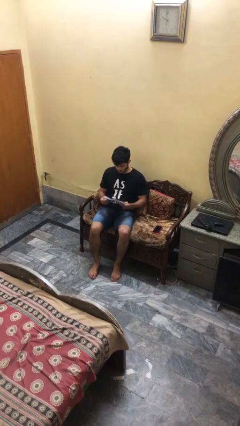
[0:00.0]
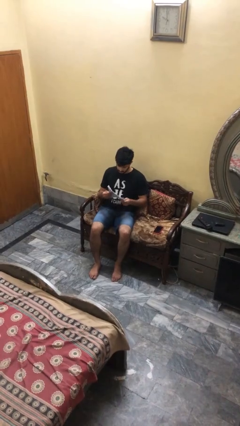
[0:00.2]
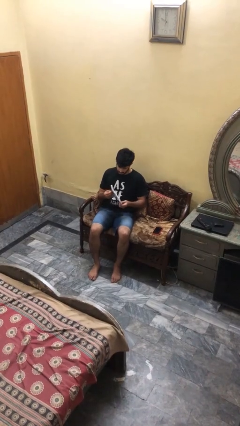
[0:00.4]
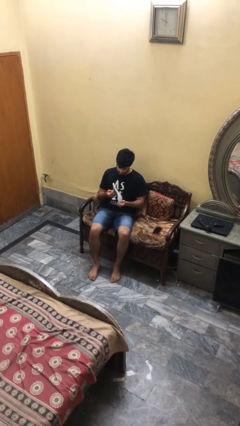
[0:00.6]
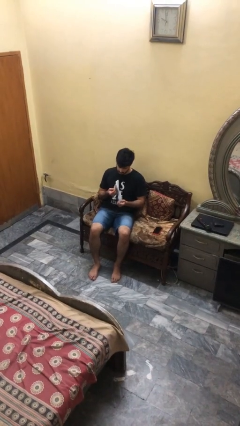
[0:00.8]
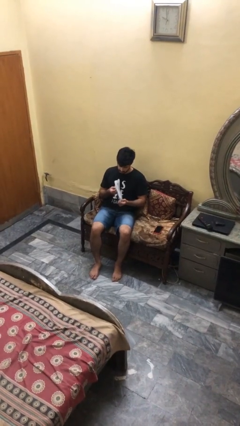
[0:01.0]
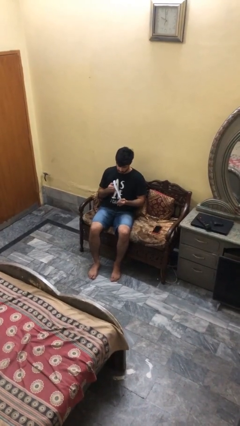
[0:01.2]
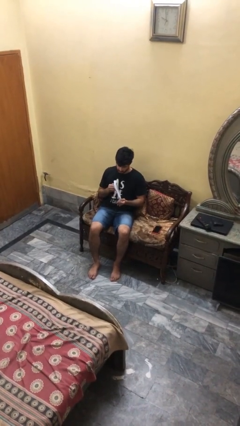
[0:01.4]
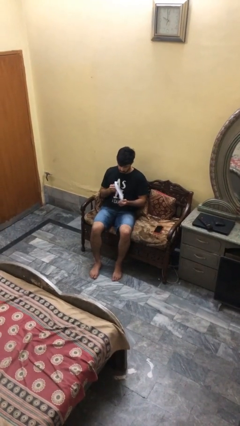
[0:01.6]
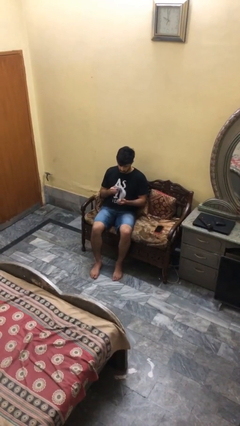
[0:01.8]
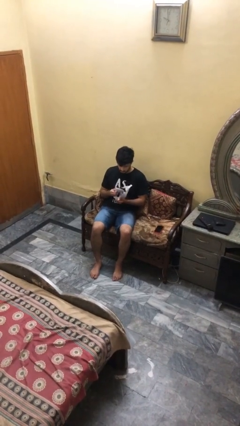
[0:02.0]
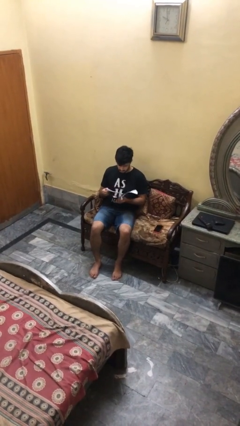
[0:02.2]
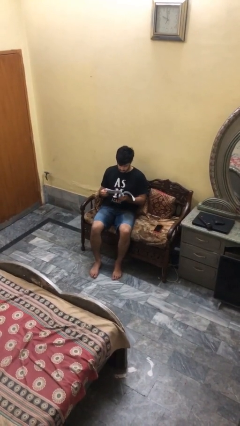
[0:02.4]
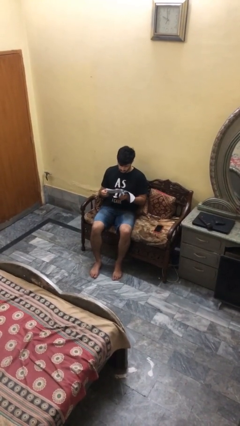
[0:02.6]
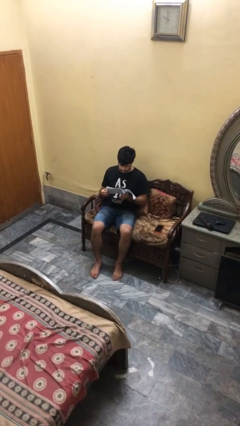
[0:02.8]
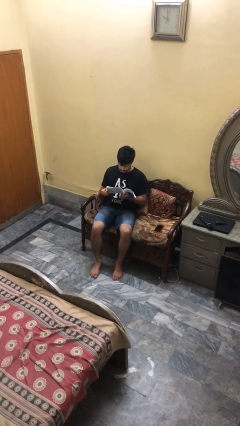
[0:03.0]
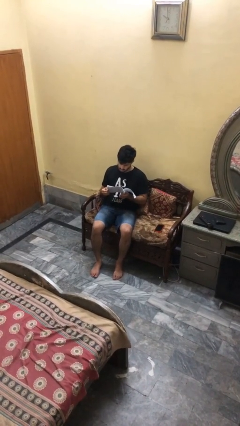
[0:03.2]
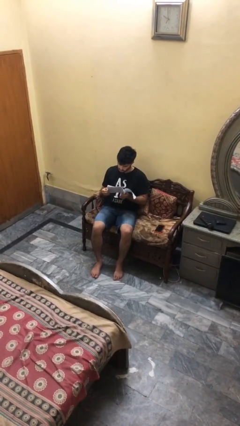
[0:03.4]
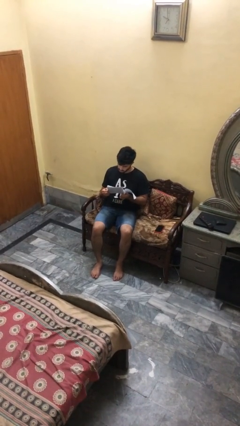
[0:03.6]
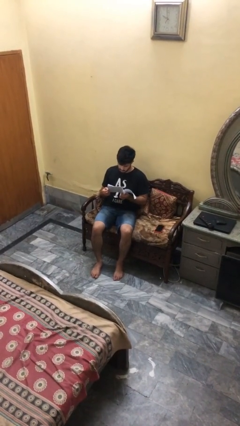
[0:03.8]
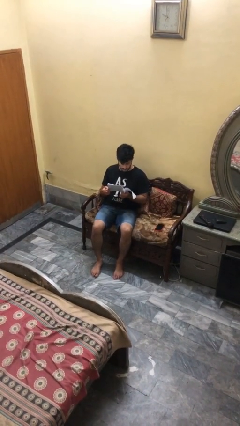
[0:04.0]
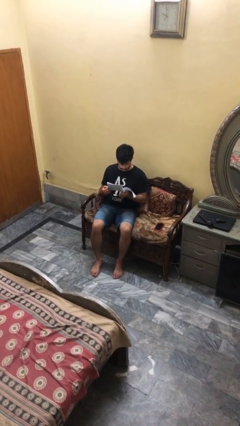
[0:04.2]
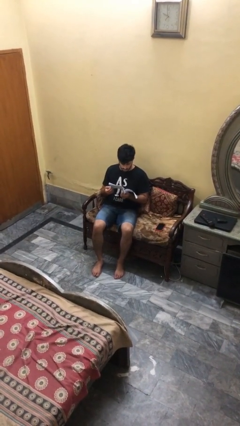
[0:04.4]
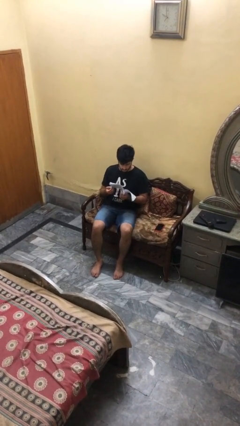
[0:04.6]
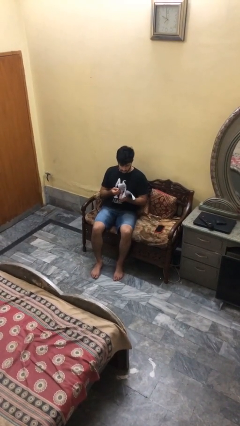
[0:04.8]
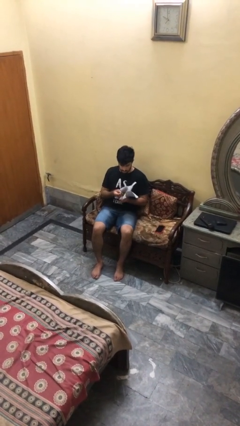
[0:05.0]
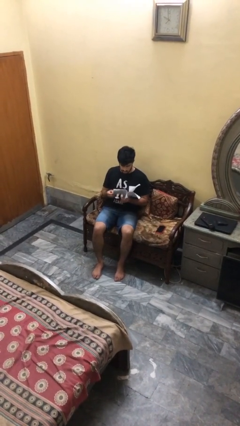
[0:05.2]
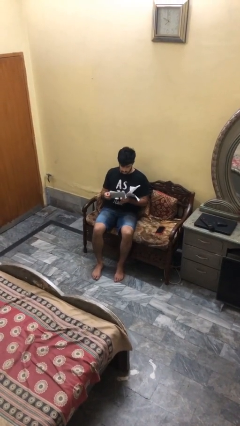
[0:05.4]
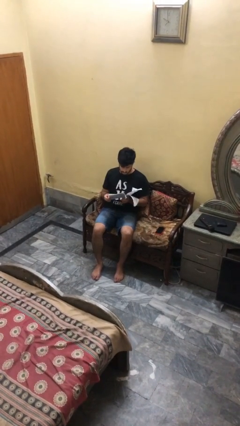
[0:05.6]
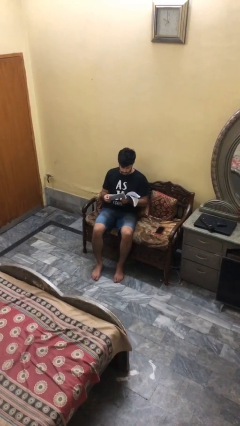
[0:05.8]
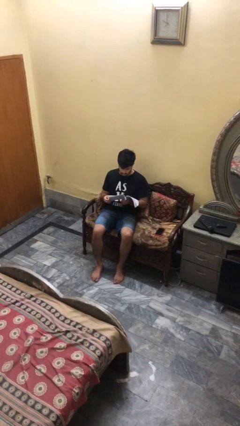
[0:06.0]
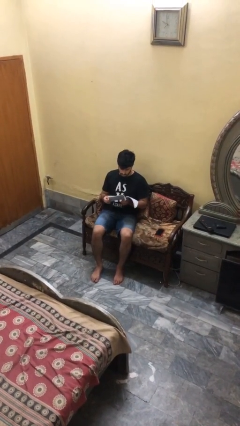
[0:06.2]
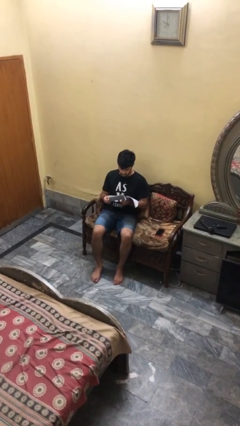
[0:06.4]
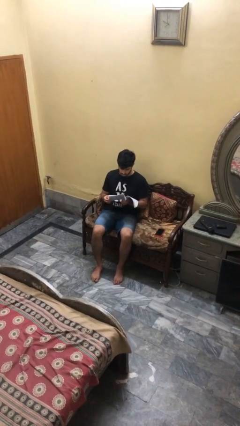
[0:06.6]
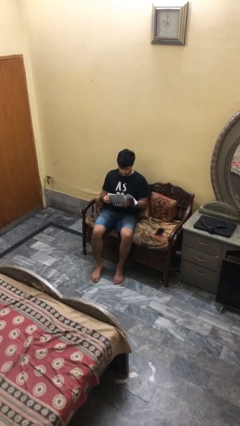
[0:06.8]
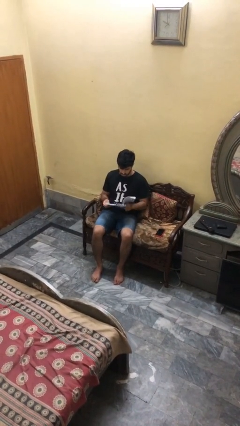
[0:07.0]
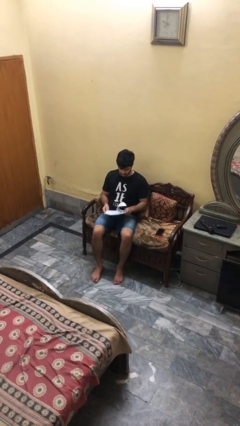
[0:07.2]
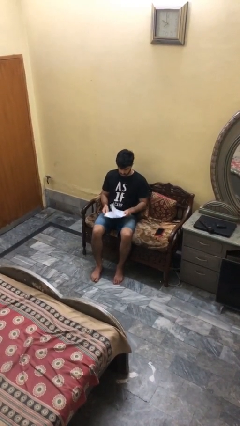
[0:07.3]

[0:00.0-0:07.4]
person reads magazine

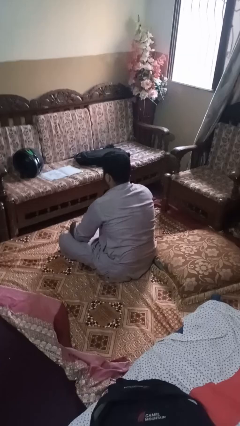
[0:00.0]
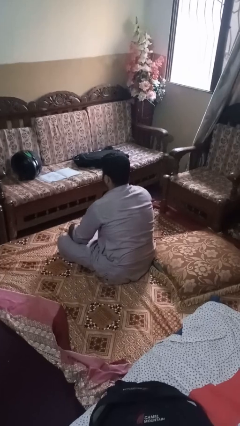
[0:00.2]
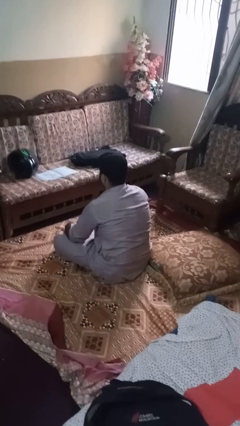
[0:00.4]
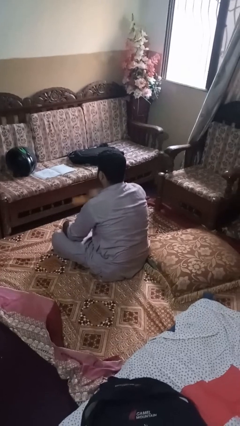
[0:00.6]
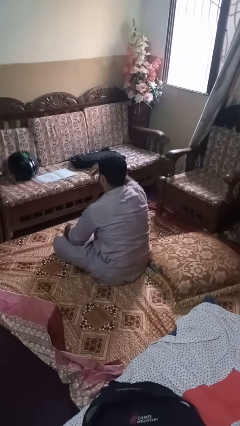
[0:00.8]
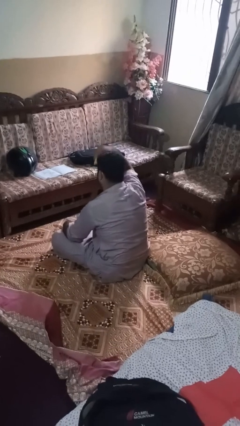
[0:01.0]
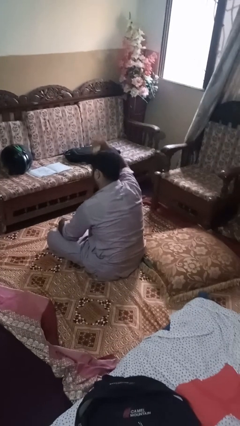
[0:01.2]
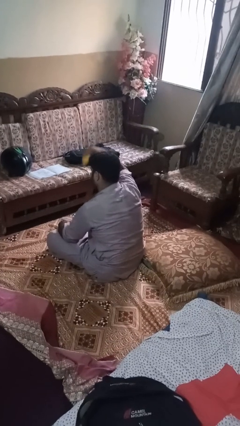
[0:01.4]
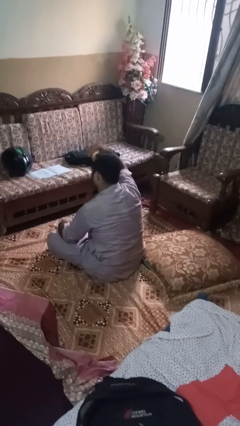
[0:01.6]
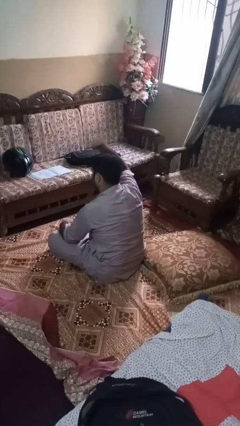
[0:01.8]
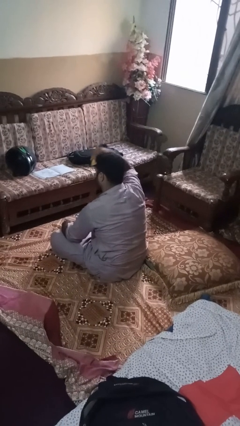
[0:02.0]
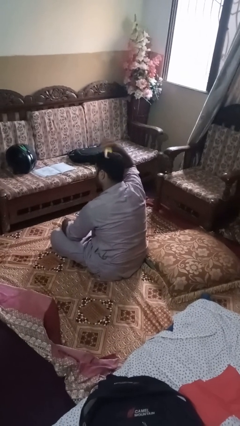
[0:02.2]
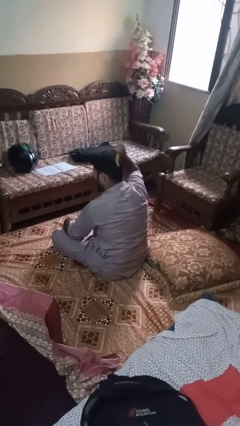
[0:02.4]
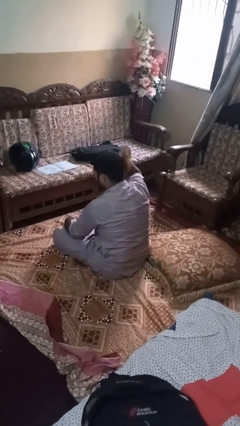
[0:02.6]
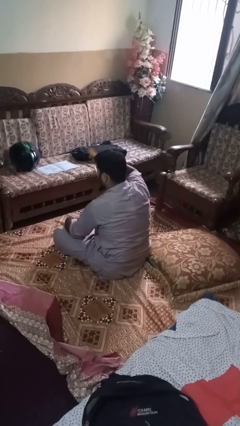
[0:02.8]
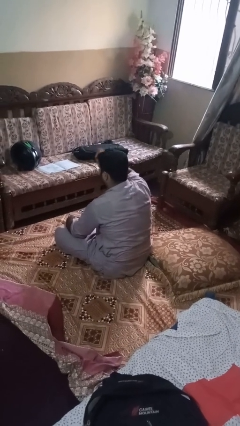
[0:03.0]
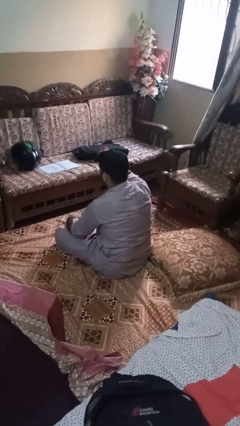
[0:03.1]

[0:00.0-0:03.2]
person brushes hair

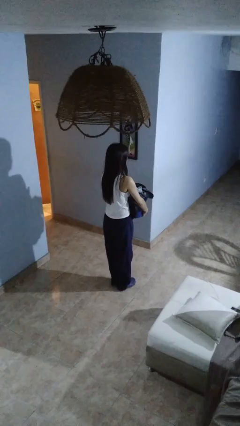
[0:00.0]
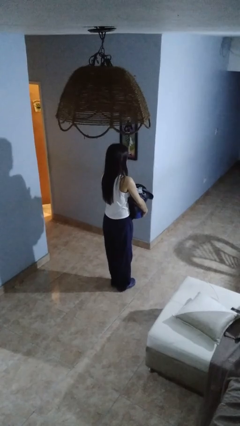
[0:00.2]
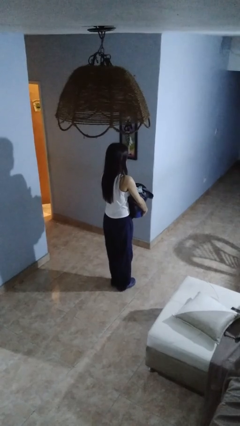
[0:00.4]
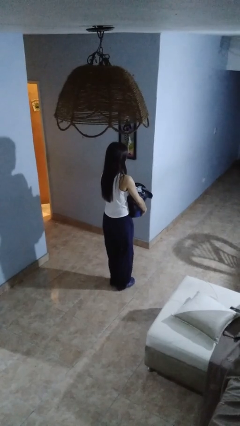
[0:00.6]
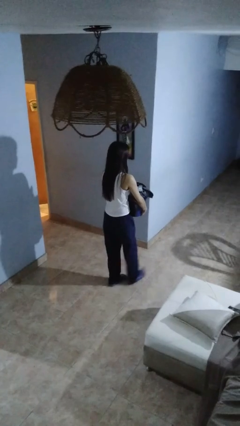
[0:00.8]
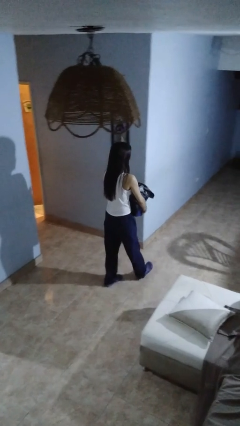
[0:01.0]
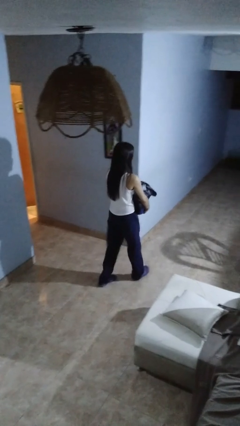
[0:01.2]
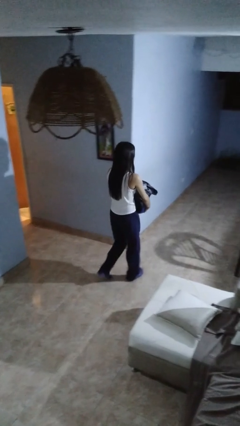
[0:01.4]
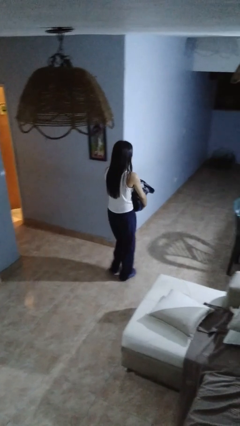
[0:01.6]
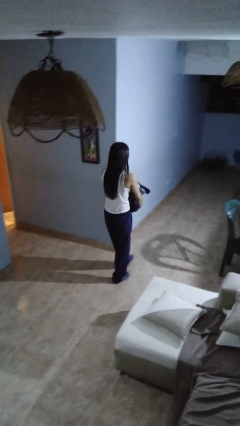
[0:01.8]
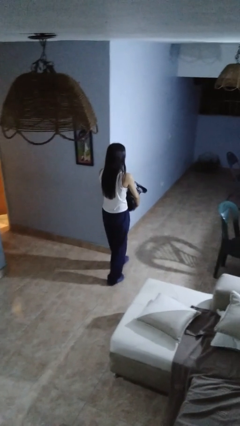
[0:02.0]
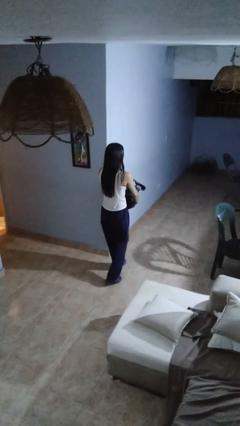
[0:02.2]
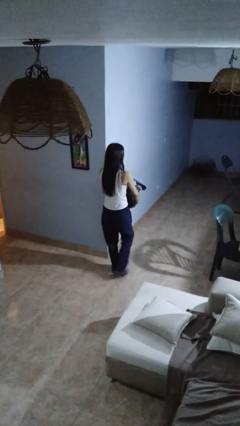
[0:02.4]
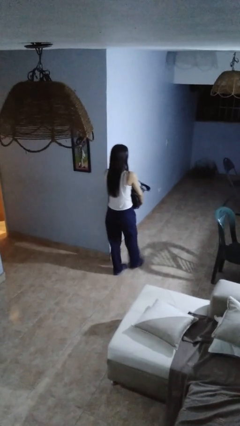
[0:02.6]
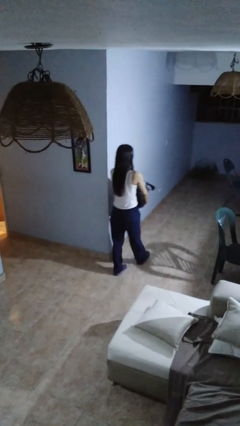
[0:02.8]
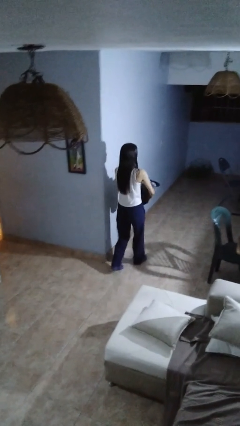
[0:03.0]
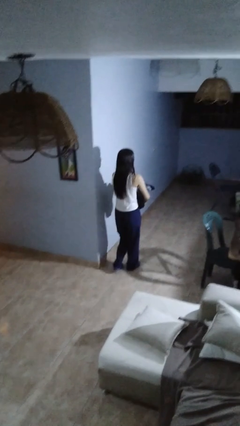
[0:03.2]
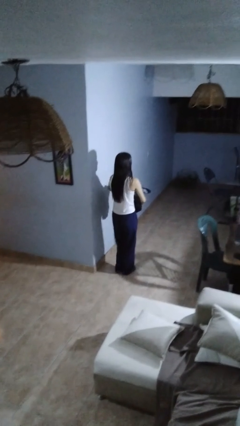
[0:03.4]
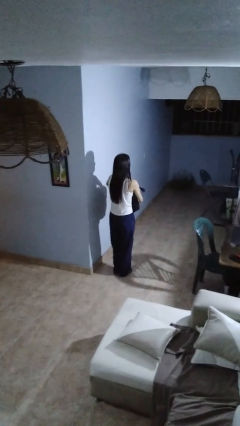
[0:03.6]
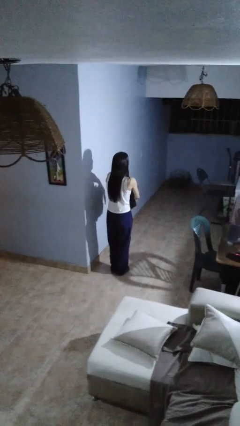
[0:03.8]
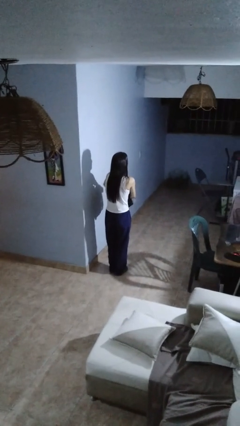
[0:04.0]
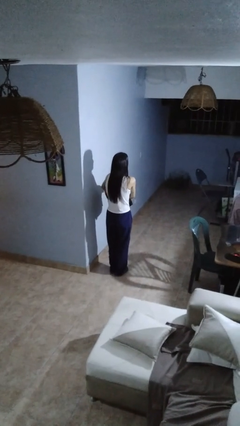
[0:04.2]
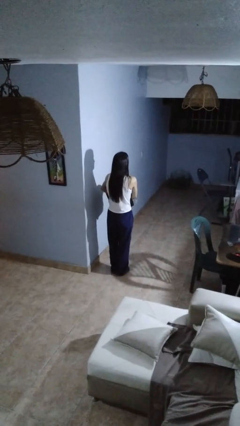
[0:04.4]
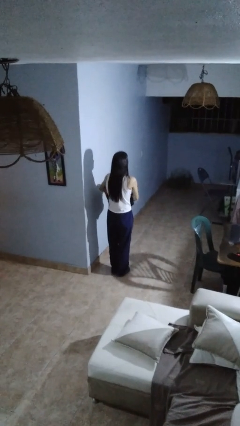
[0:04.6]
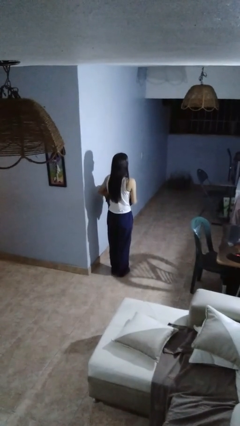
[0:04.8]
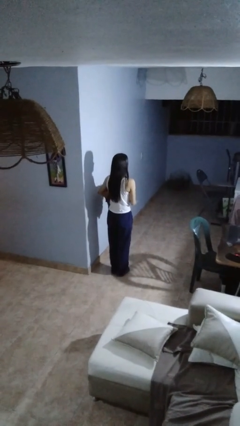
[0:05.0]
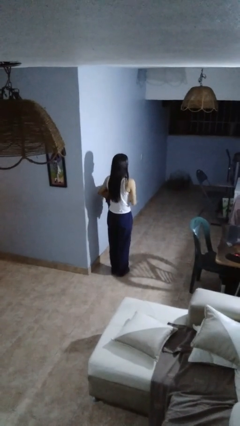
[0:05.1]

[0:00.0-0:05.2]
person carries laundry basket

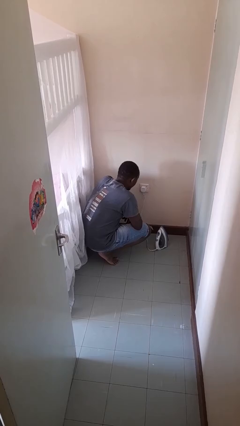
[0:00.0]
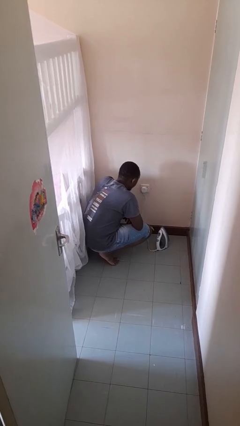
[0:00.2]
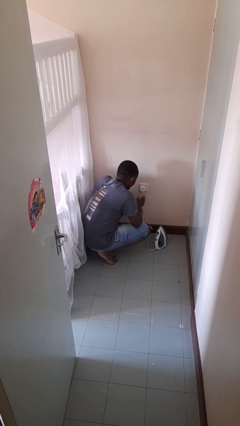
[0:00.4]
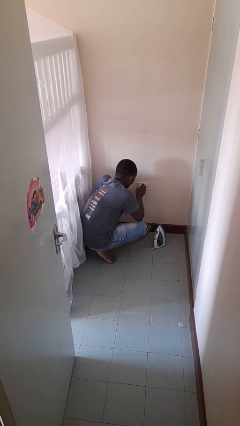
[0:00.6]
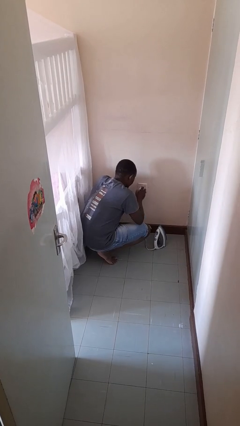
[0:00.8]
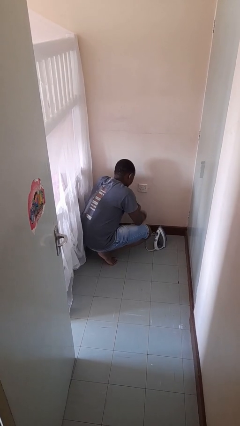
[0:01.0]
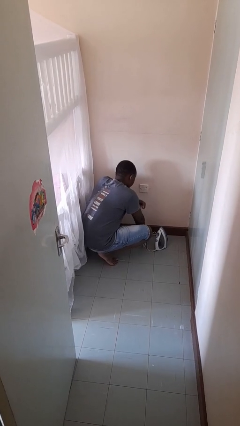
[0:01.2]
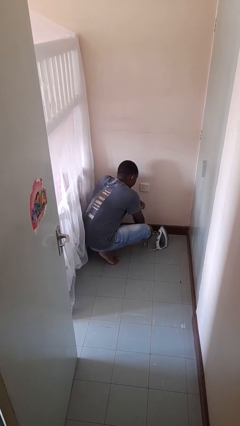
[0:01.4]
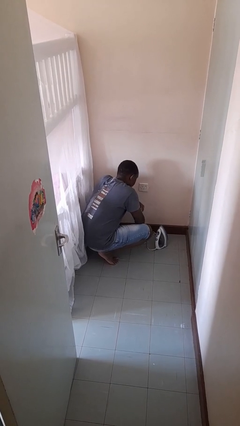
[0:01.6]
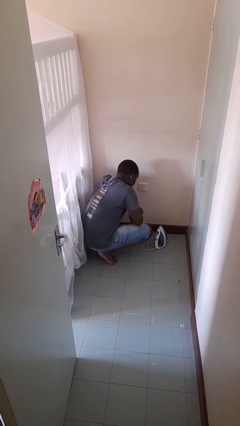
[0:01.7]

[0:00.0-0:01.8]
person unplugs from electrical socket
